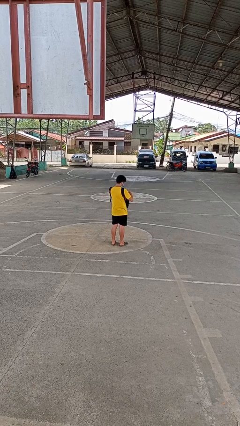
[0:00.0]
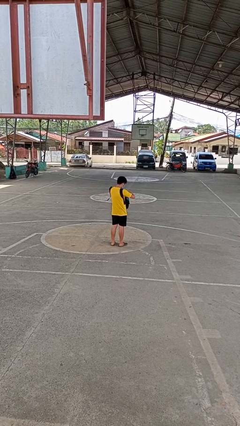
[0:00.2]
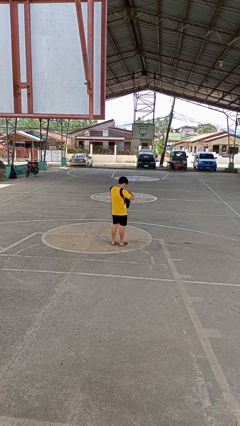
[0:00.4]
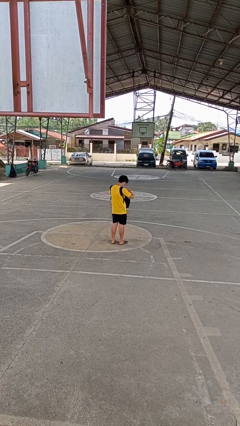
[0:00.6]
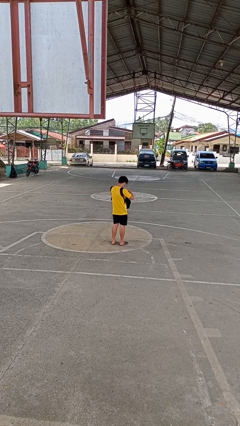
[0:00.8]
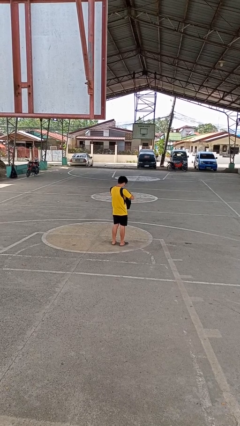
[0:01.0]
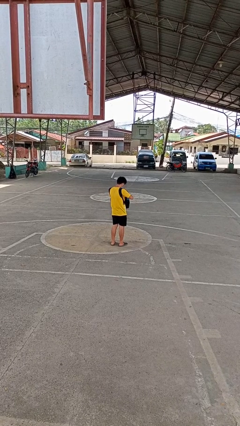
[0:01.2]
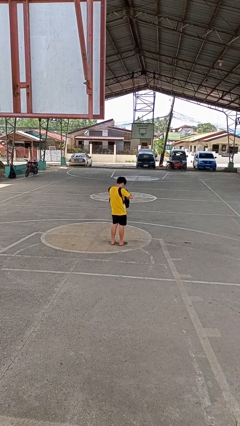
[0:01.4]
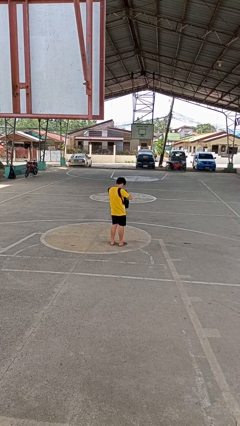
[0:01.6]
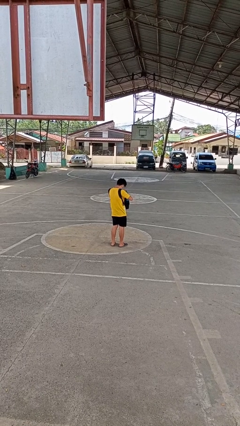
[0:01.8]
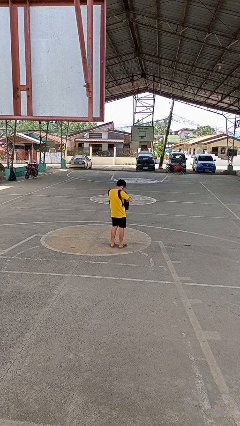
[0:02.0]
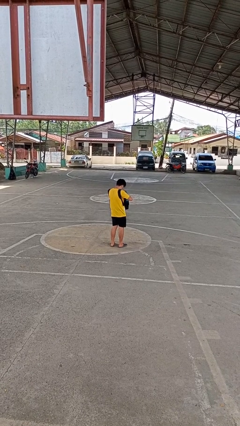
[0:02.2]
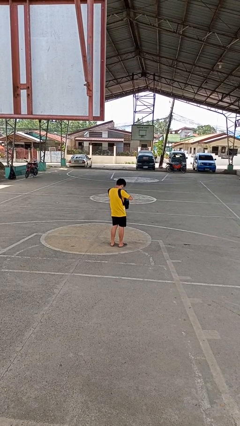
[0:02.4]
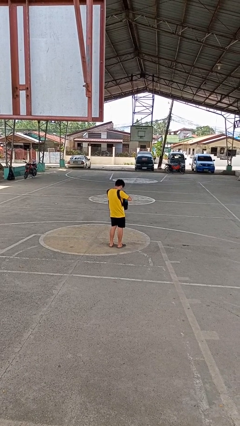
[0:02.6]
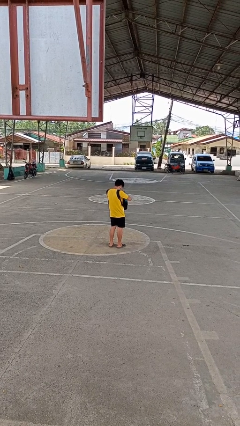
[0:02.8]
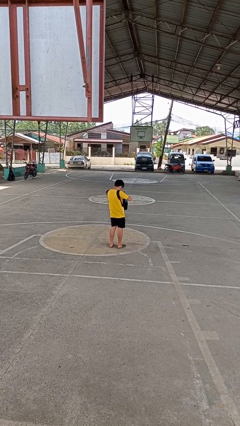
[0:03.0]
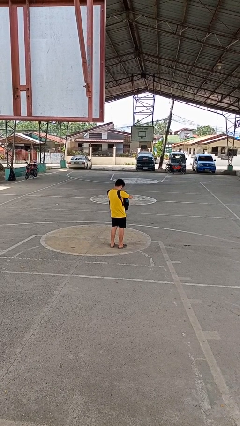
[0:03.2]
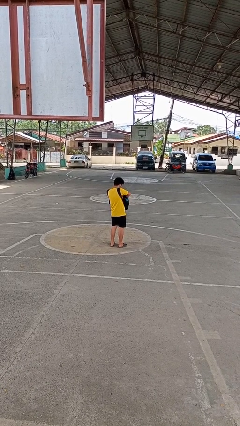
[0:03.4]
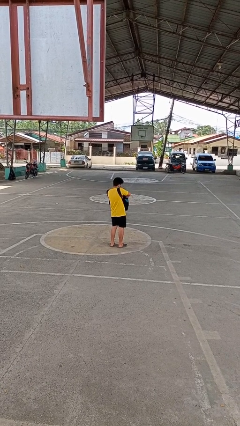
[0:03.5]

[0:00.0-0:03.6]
person searches in backpack

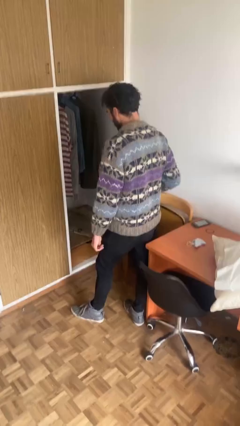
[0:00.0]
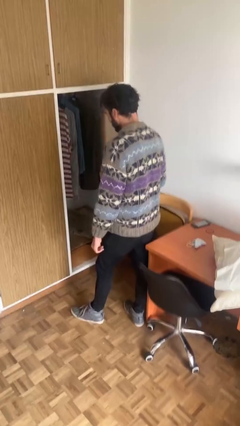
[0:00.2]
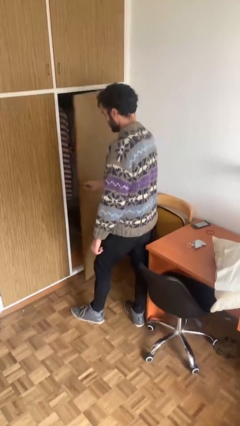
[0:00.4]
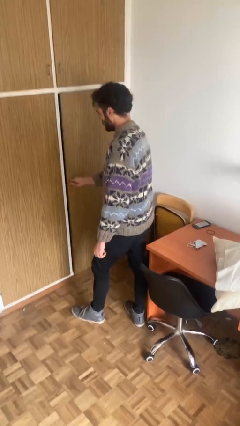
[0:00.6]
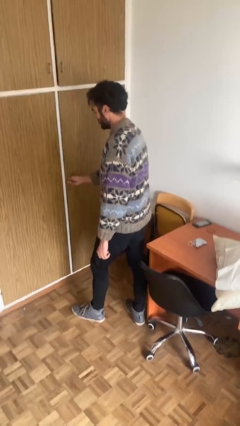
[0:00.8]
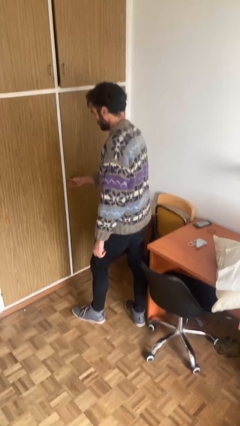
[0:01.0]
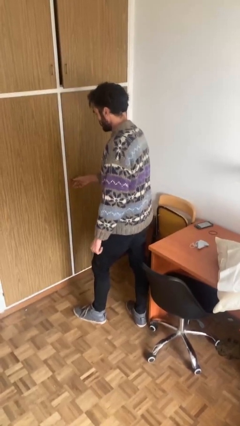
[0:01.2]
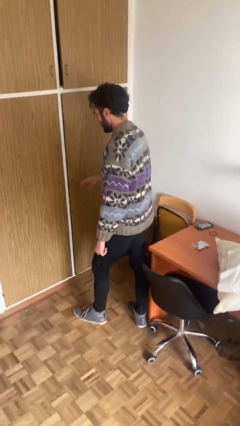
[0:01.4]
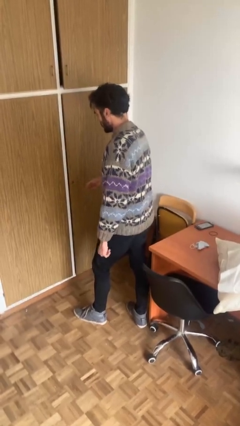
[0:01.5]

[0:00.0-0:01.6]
person closes closet door

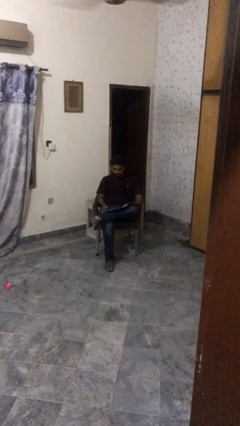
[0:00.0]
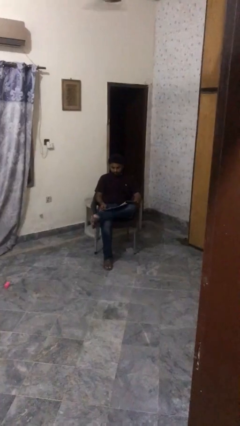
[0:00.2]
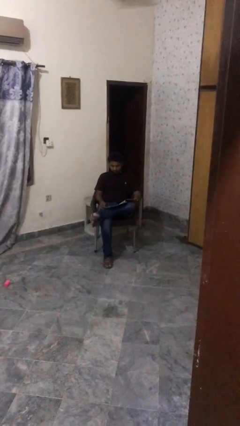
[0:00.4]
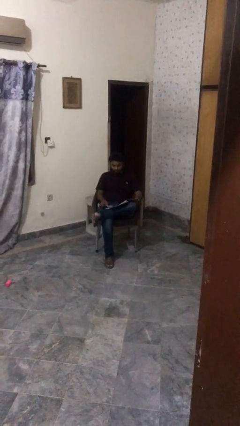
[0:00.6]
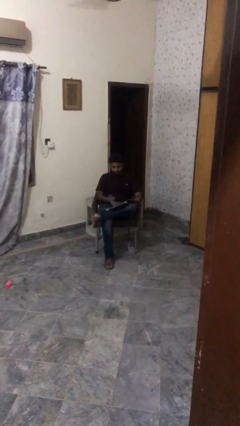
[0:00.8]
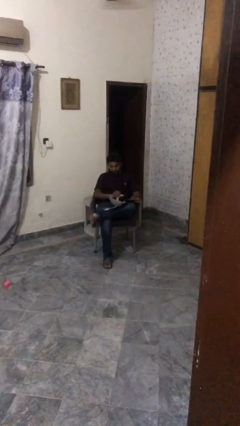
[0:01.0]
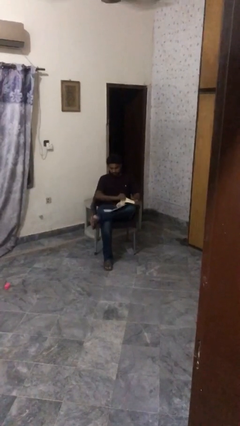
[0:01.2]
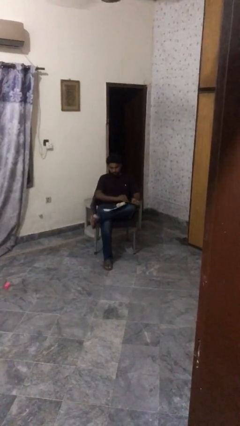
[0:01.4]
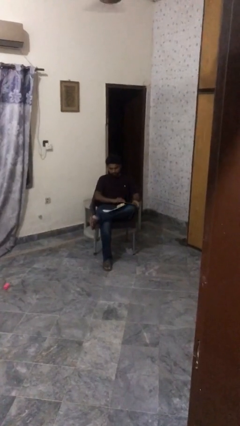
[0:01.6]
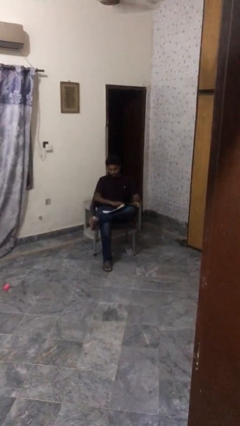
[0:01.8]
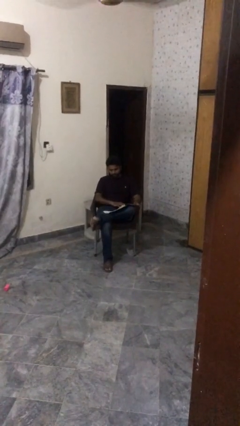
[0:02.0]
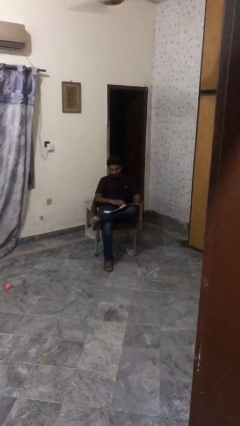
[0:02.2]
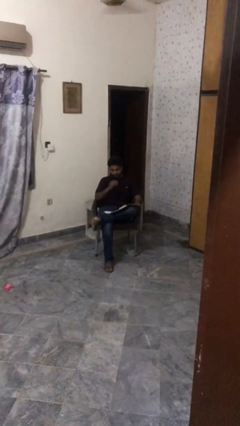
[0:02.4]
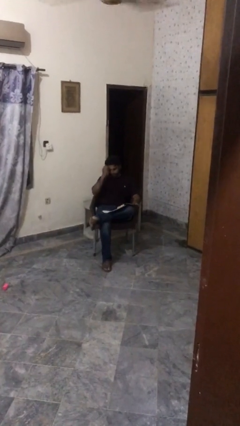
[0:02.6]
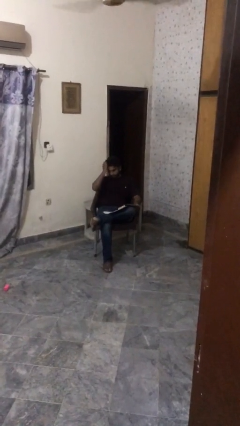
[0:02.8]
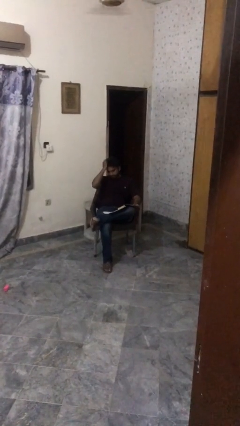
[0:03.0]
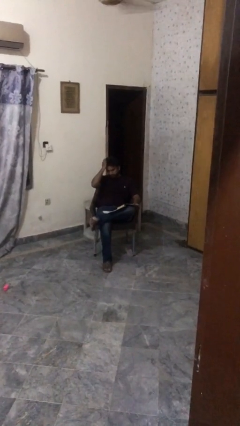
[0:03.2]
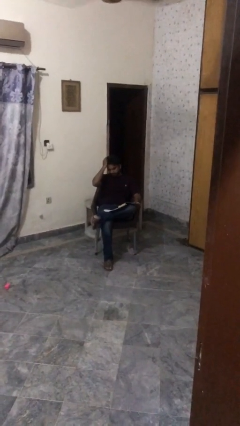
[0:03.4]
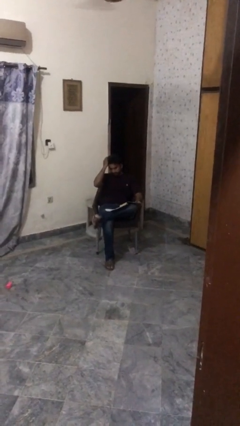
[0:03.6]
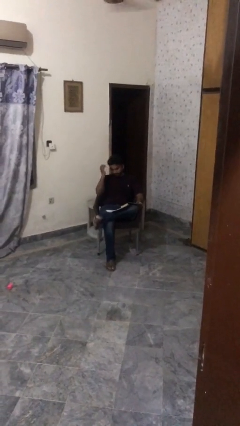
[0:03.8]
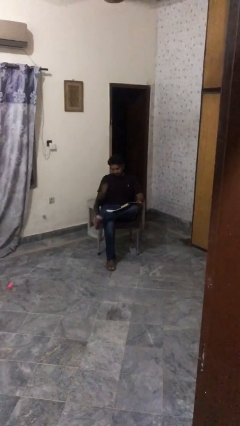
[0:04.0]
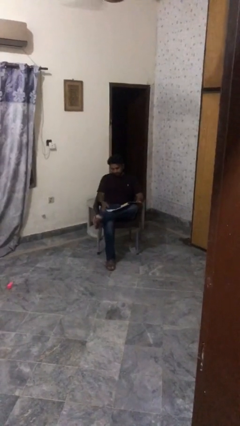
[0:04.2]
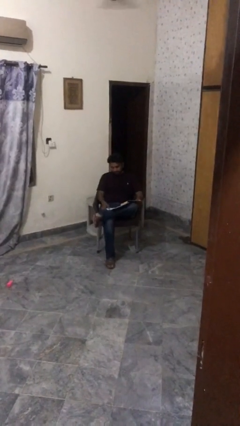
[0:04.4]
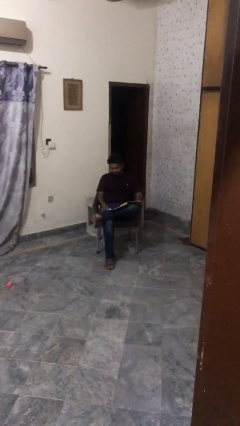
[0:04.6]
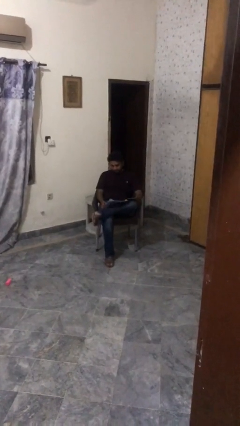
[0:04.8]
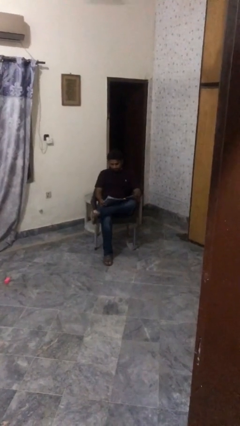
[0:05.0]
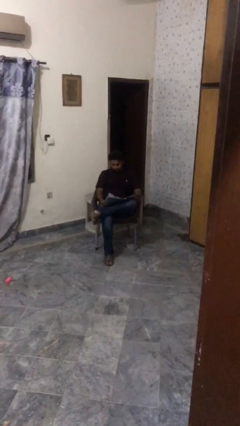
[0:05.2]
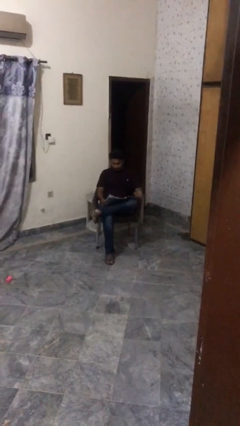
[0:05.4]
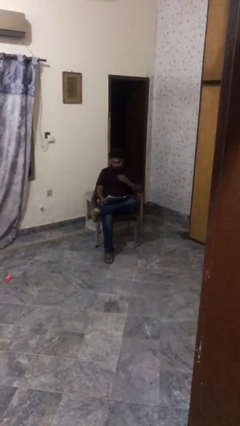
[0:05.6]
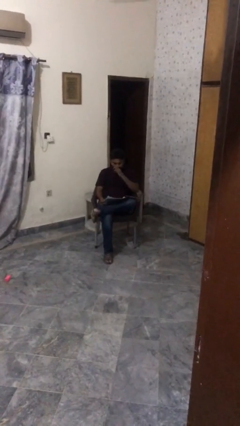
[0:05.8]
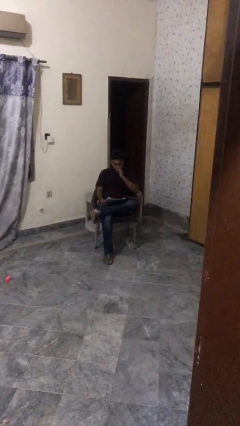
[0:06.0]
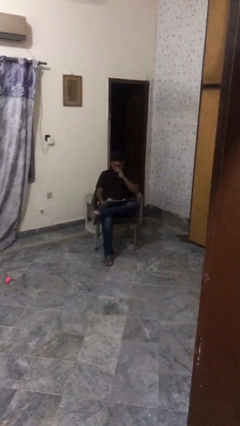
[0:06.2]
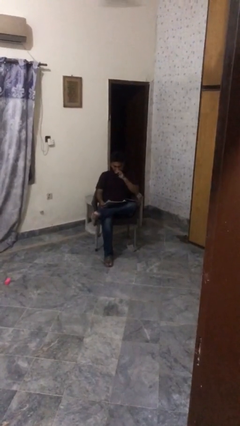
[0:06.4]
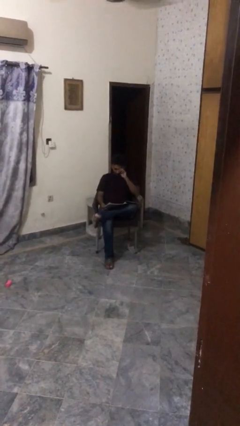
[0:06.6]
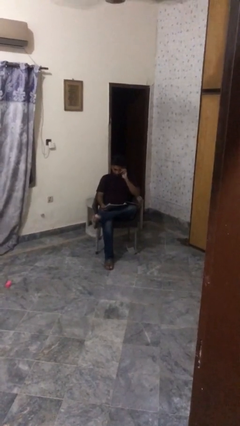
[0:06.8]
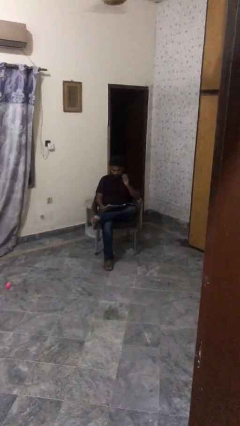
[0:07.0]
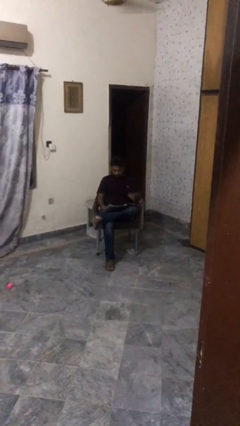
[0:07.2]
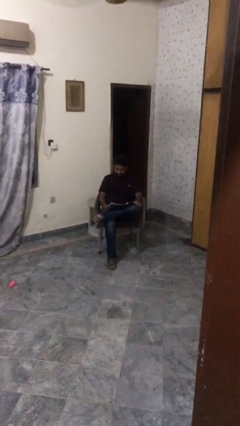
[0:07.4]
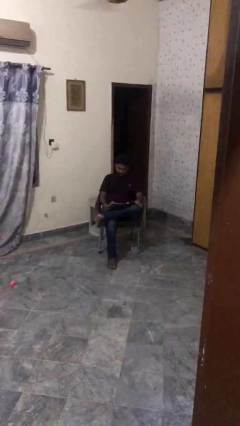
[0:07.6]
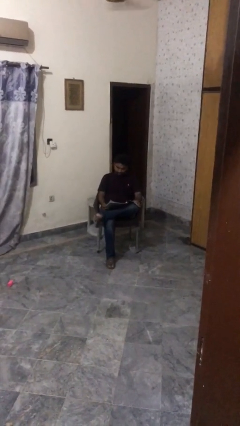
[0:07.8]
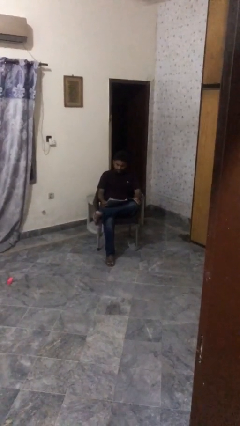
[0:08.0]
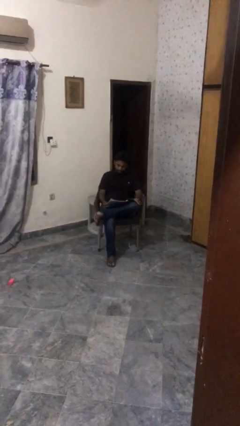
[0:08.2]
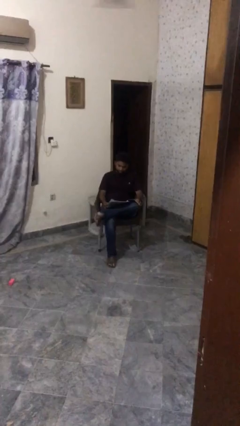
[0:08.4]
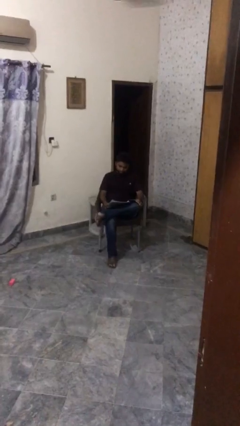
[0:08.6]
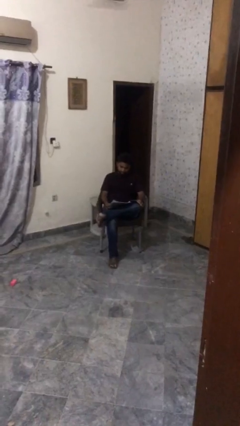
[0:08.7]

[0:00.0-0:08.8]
person reads document

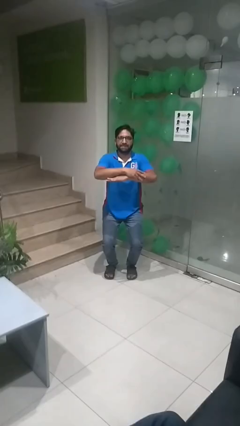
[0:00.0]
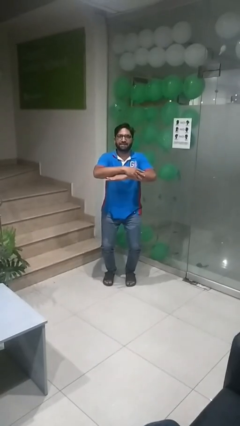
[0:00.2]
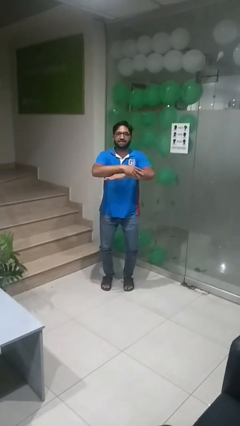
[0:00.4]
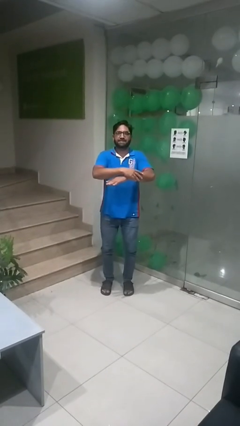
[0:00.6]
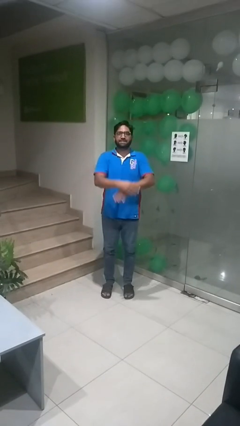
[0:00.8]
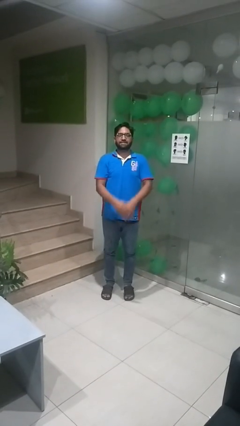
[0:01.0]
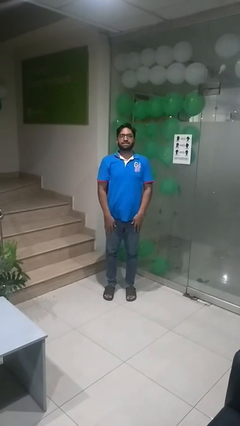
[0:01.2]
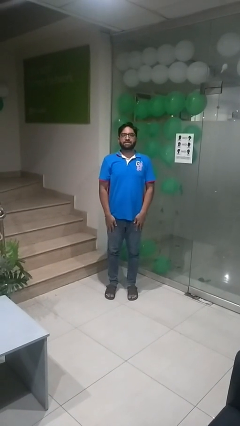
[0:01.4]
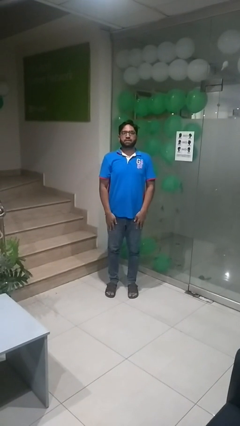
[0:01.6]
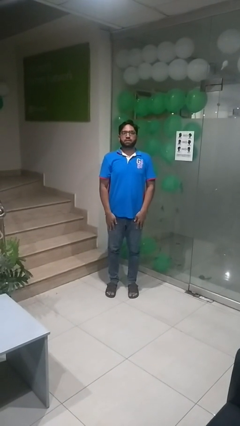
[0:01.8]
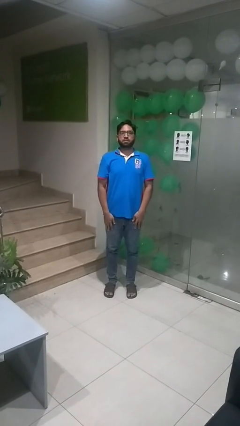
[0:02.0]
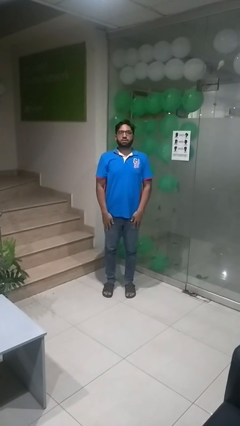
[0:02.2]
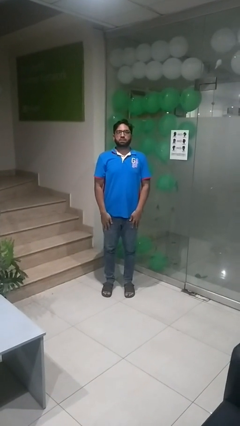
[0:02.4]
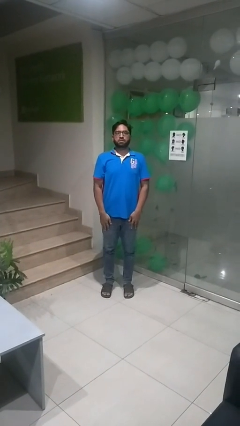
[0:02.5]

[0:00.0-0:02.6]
person stands up

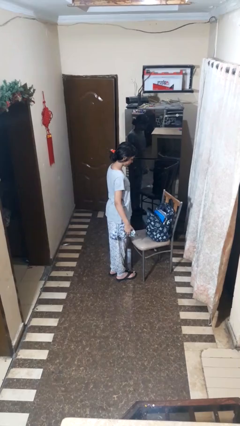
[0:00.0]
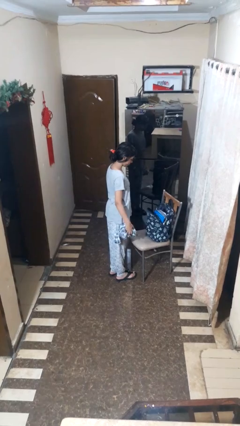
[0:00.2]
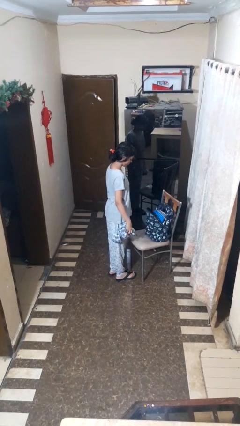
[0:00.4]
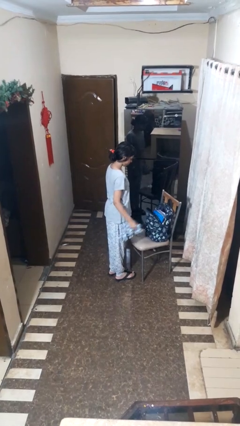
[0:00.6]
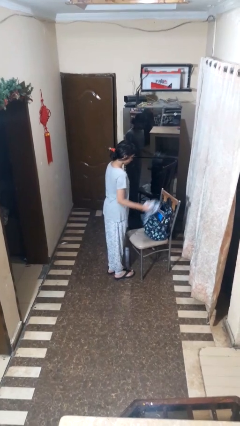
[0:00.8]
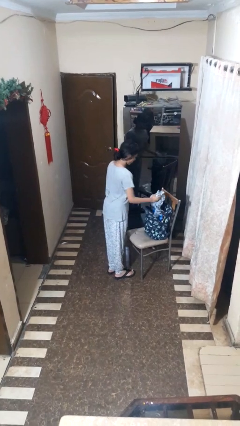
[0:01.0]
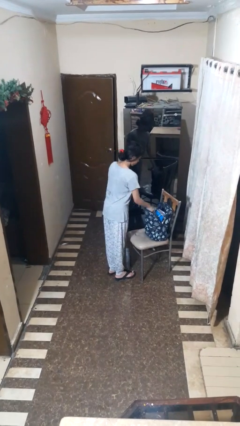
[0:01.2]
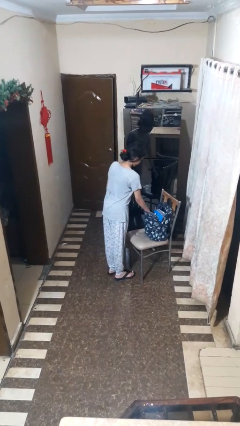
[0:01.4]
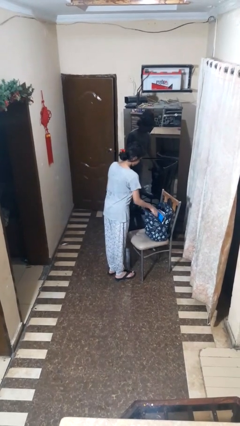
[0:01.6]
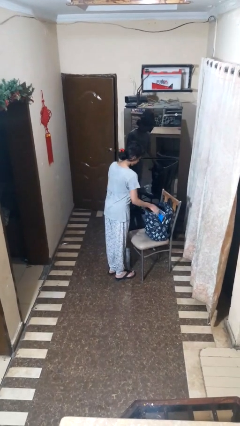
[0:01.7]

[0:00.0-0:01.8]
person puts object into bag
